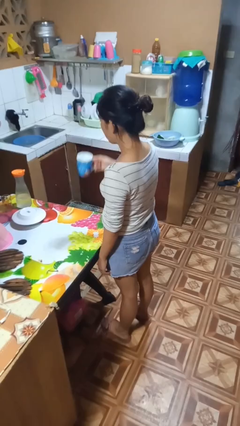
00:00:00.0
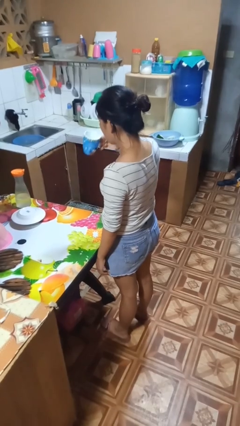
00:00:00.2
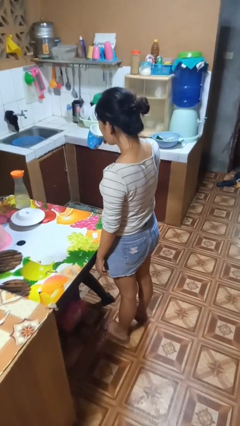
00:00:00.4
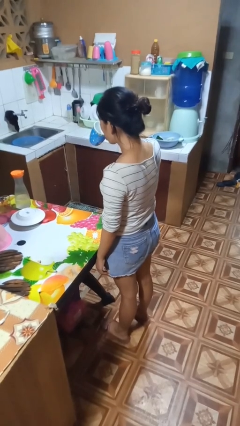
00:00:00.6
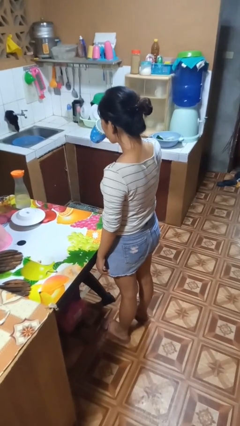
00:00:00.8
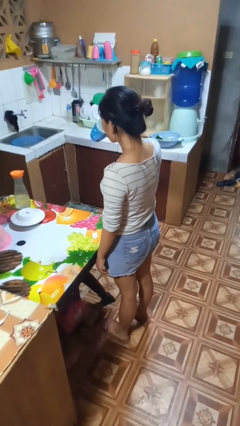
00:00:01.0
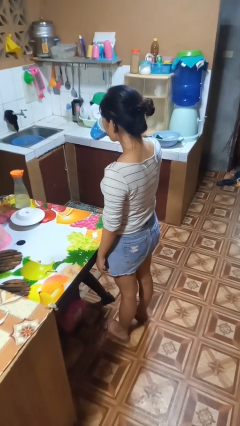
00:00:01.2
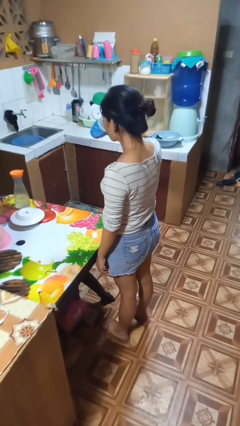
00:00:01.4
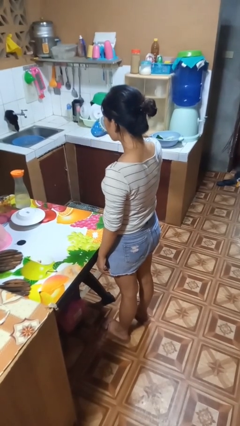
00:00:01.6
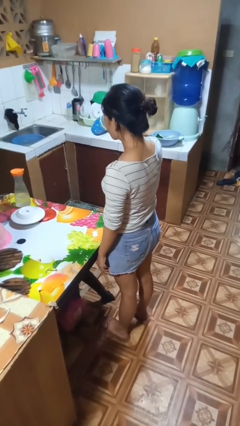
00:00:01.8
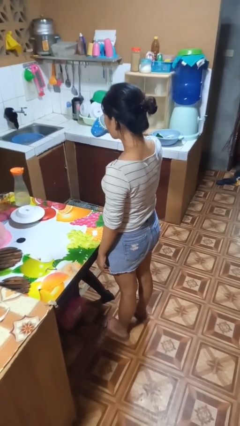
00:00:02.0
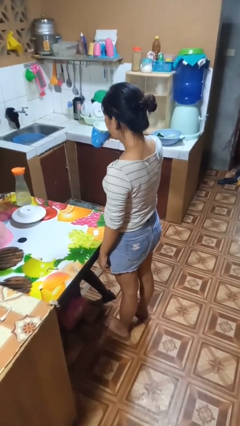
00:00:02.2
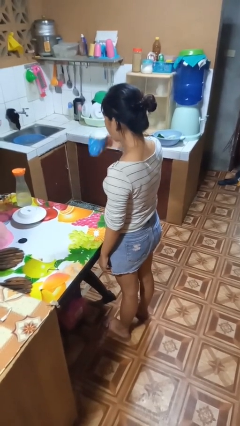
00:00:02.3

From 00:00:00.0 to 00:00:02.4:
person drinks from mug

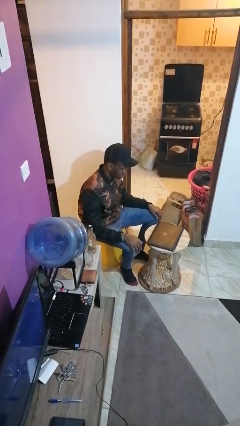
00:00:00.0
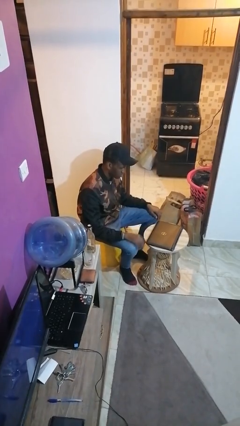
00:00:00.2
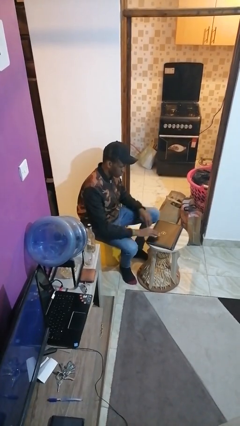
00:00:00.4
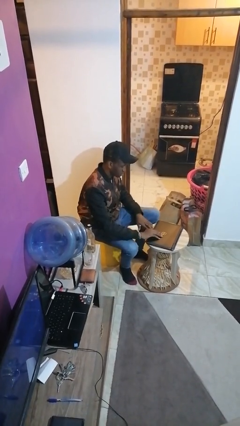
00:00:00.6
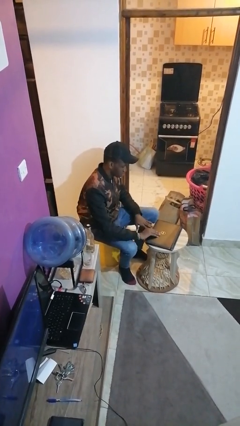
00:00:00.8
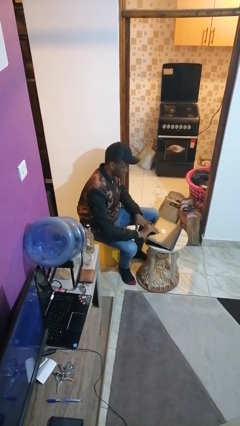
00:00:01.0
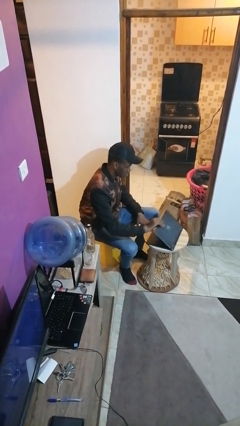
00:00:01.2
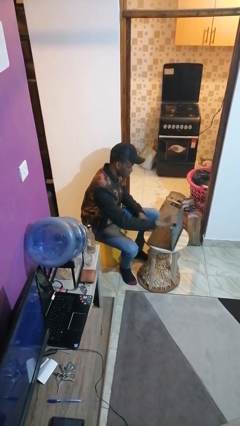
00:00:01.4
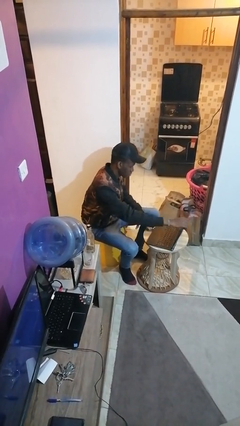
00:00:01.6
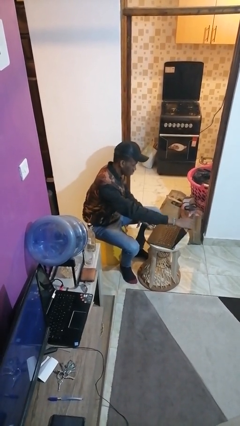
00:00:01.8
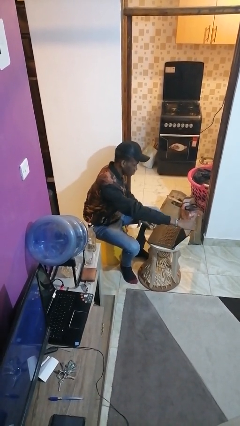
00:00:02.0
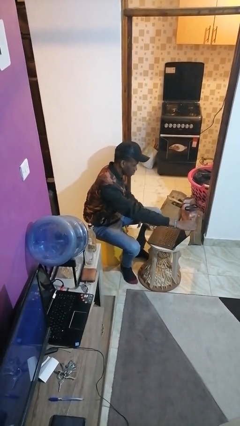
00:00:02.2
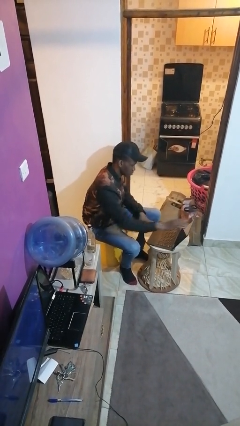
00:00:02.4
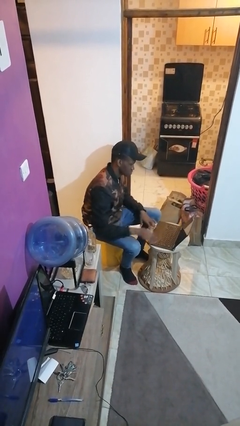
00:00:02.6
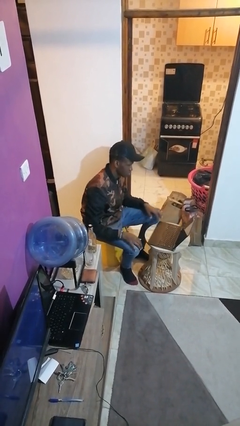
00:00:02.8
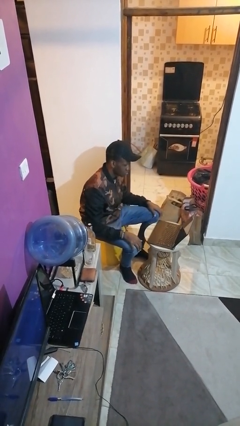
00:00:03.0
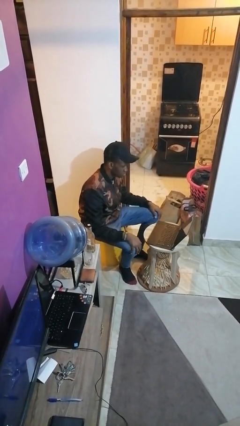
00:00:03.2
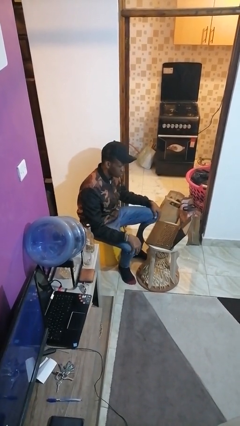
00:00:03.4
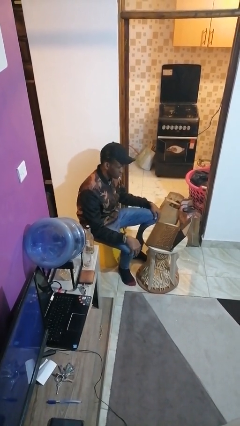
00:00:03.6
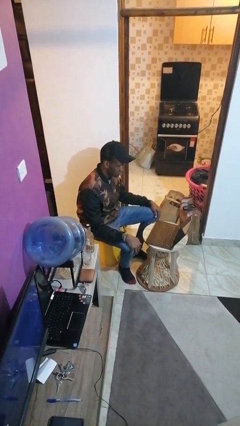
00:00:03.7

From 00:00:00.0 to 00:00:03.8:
person opens laptop

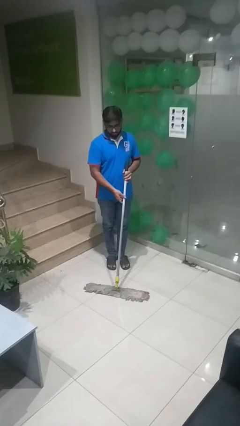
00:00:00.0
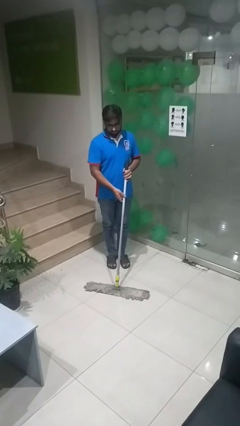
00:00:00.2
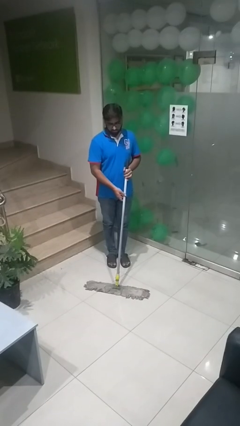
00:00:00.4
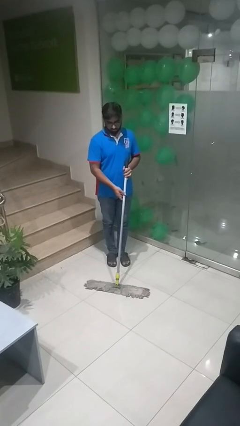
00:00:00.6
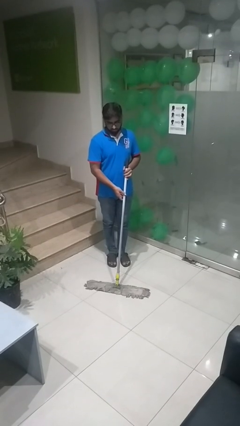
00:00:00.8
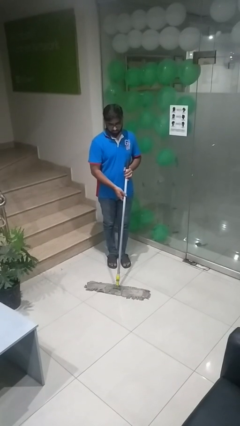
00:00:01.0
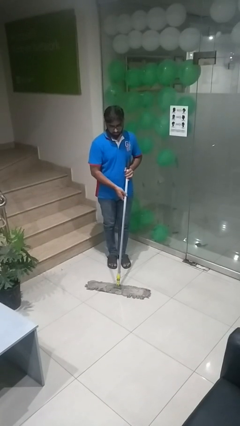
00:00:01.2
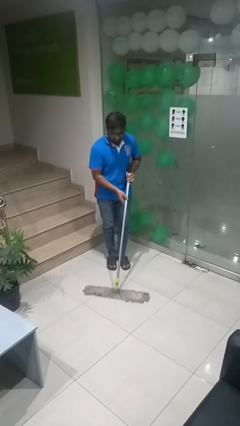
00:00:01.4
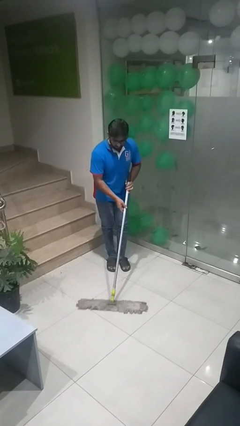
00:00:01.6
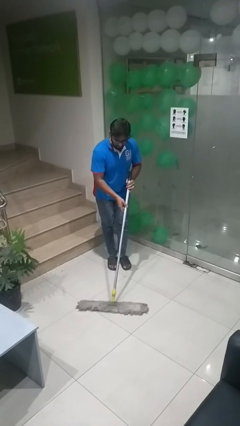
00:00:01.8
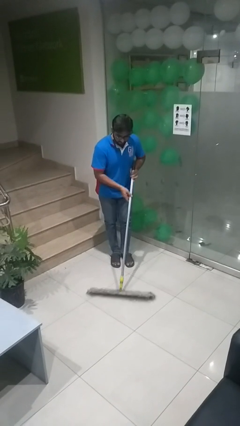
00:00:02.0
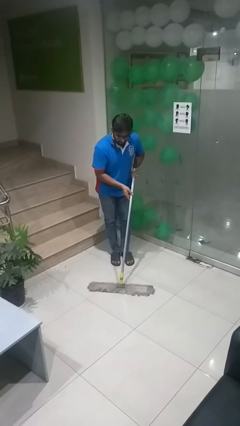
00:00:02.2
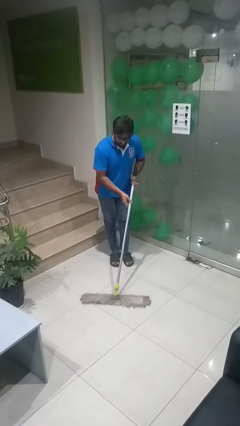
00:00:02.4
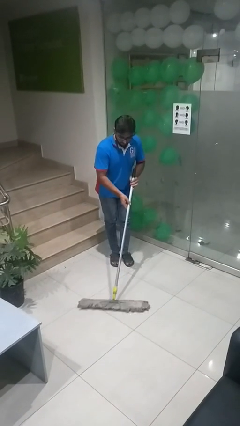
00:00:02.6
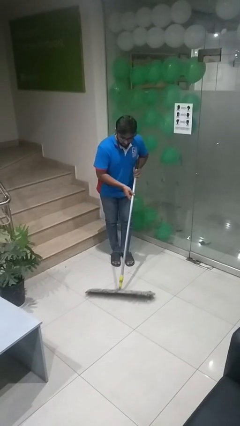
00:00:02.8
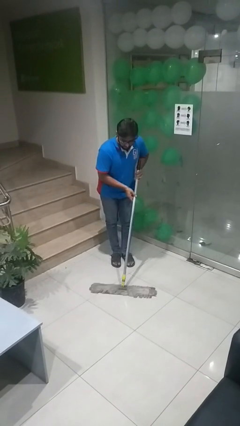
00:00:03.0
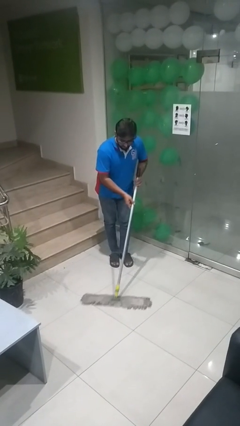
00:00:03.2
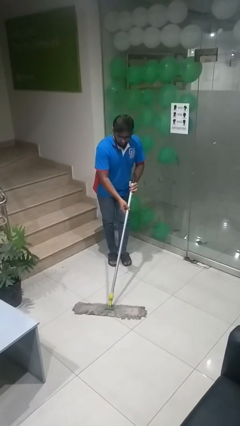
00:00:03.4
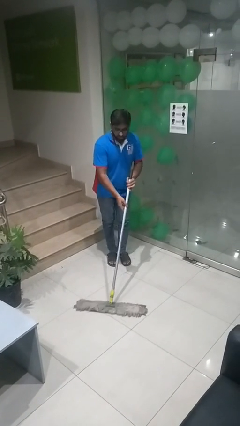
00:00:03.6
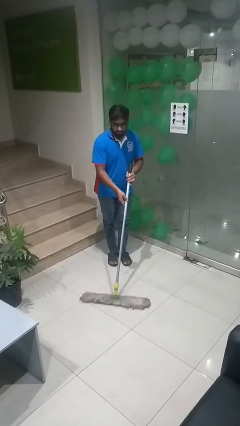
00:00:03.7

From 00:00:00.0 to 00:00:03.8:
person mops

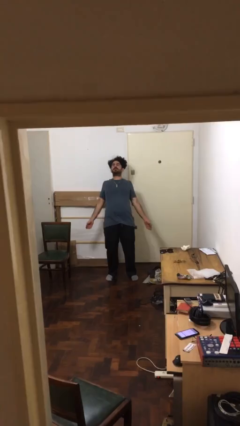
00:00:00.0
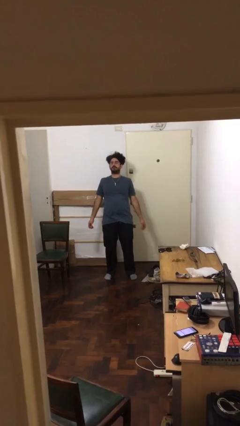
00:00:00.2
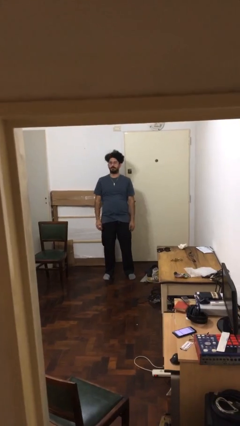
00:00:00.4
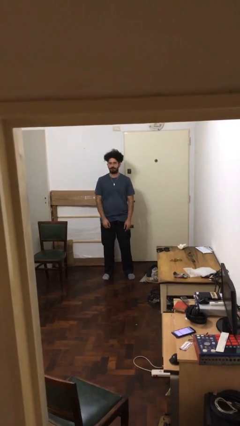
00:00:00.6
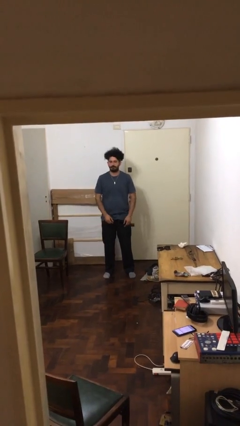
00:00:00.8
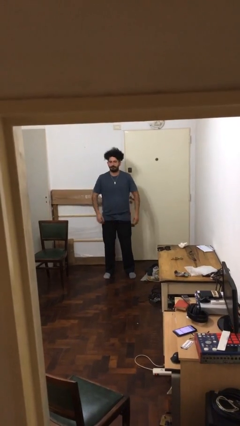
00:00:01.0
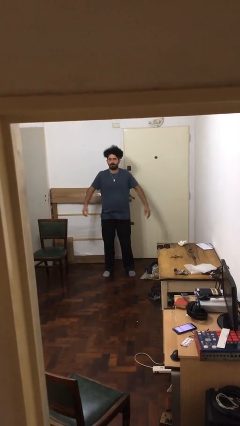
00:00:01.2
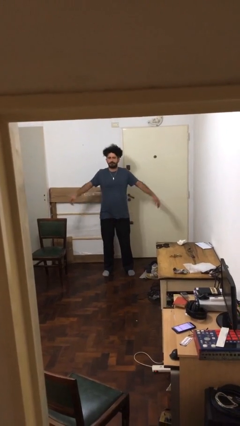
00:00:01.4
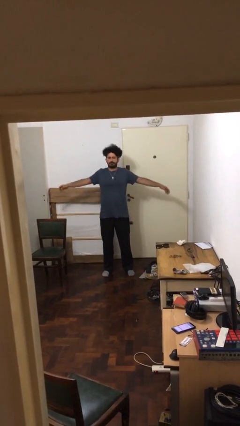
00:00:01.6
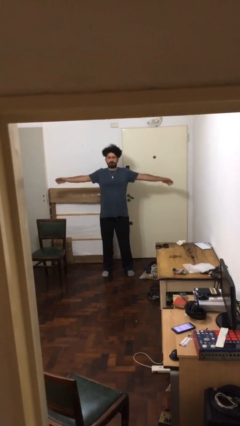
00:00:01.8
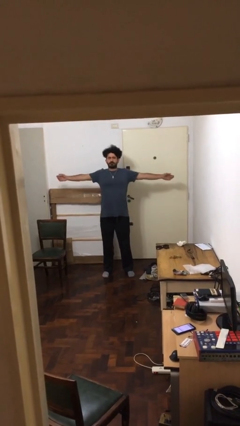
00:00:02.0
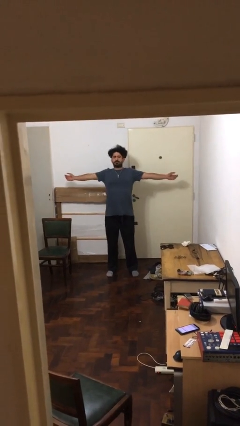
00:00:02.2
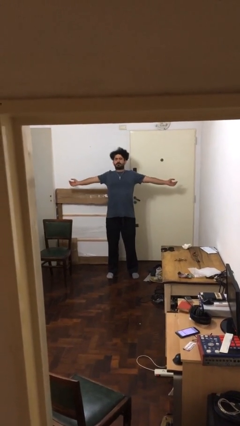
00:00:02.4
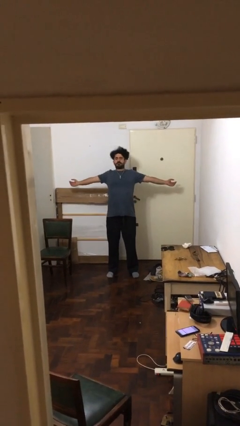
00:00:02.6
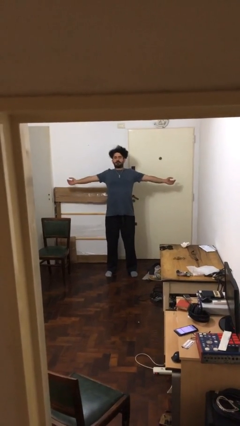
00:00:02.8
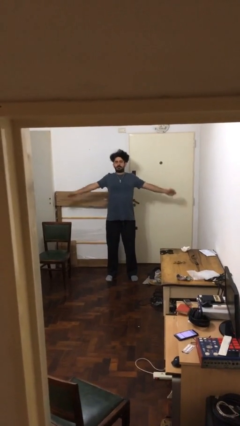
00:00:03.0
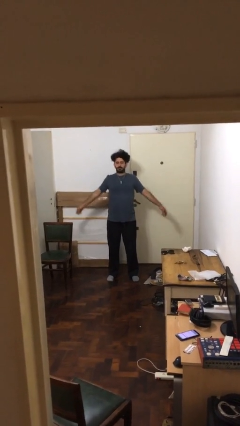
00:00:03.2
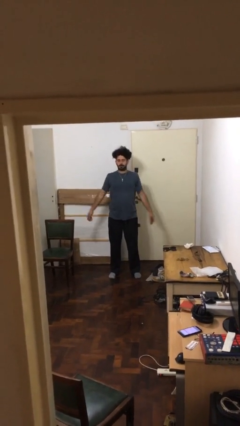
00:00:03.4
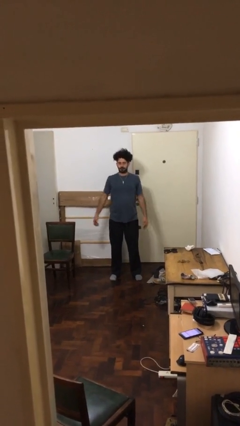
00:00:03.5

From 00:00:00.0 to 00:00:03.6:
person stretches arms to side

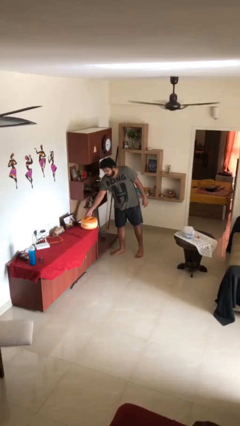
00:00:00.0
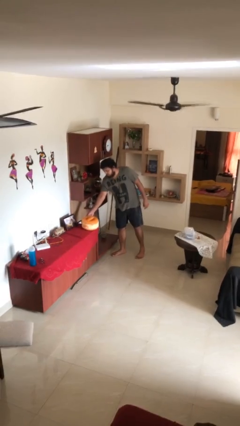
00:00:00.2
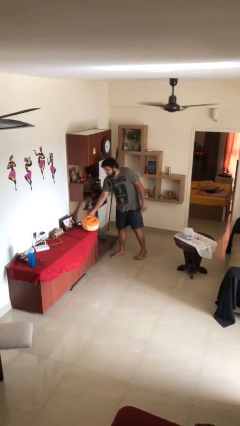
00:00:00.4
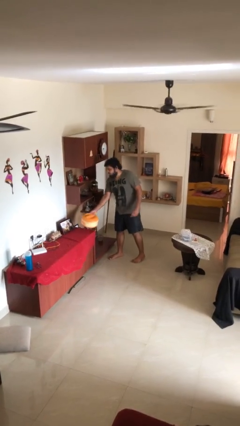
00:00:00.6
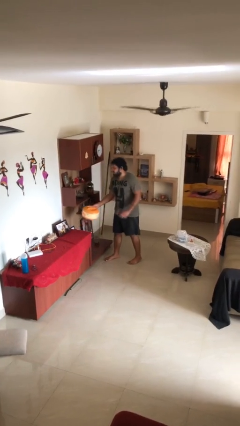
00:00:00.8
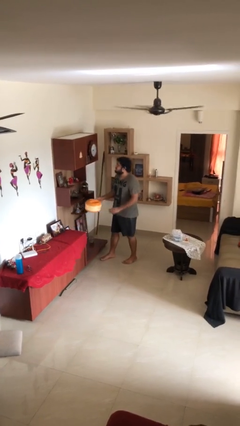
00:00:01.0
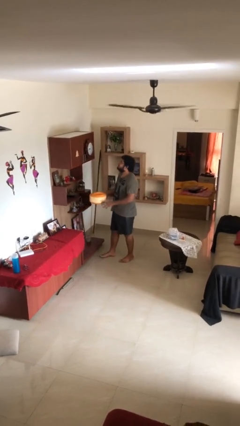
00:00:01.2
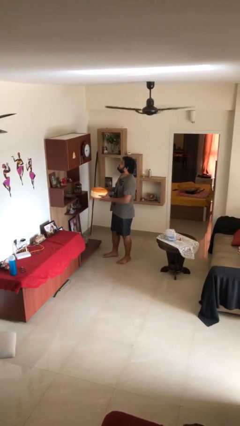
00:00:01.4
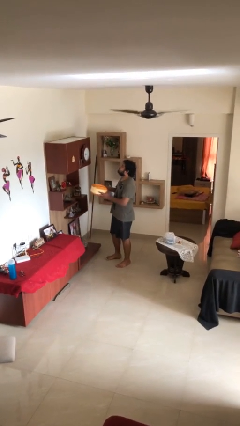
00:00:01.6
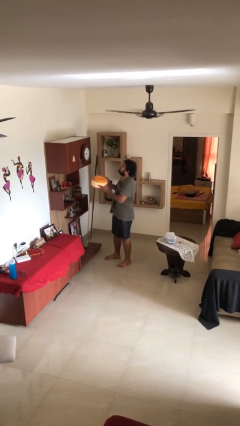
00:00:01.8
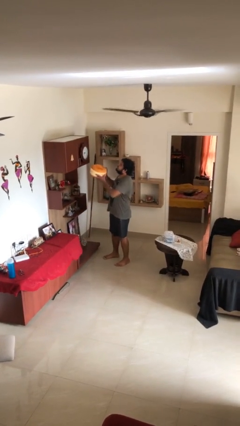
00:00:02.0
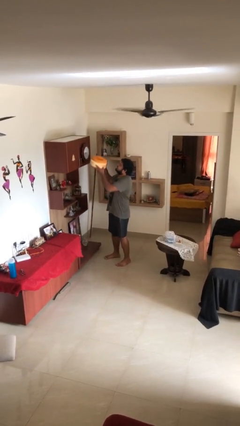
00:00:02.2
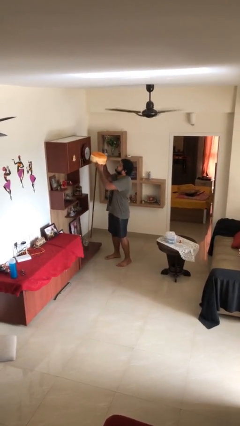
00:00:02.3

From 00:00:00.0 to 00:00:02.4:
person picks up object from table

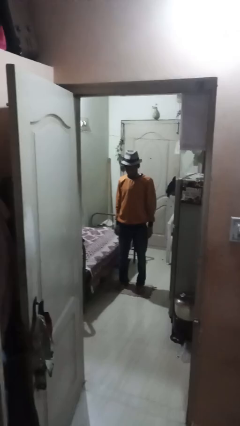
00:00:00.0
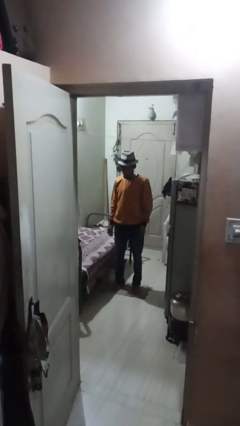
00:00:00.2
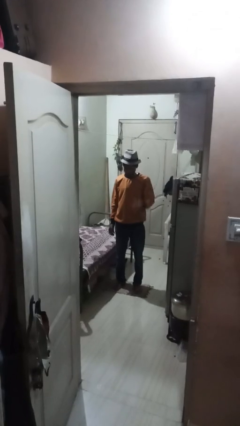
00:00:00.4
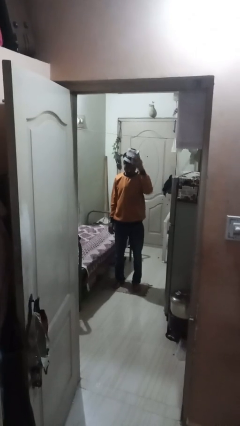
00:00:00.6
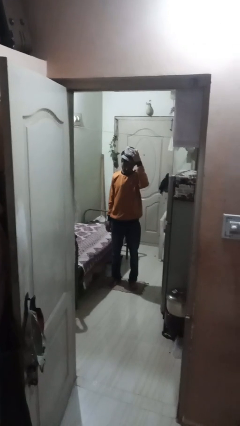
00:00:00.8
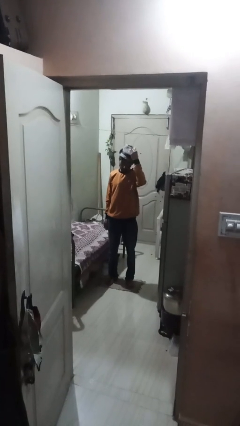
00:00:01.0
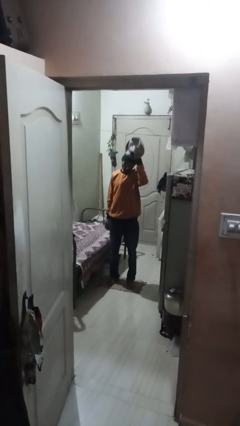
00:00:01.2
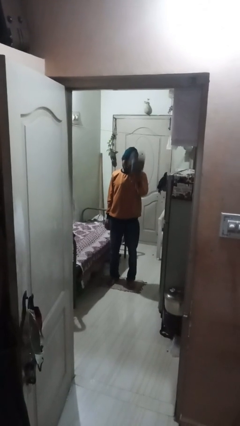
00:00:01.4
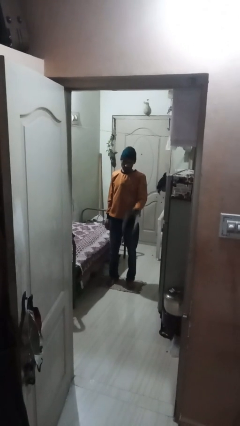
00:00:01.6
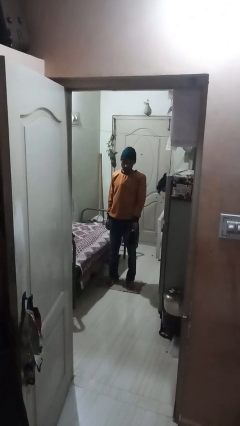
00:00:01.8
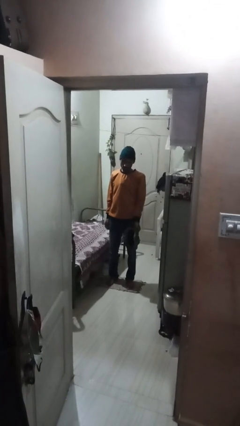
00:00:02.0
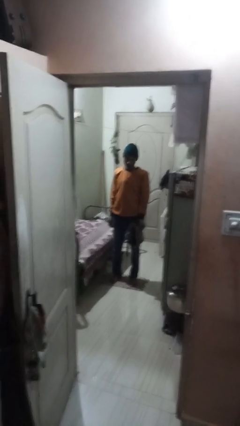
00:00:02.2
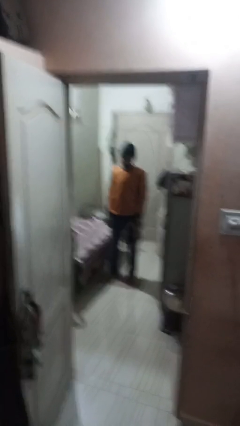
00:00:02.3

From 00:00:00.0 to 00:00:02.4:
person takes off hat